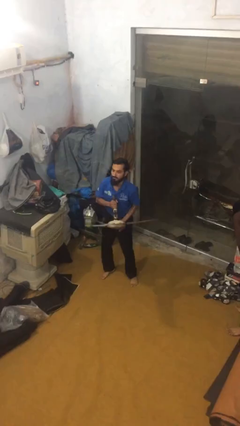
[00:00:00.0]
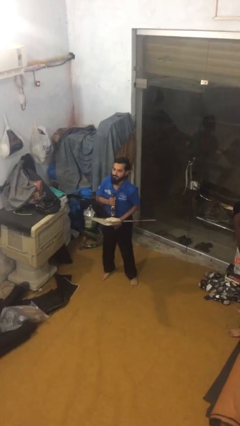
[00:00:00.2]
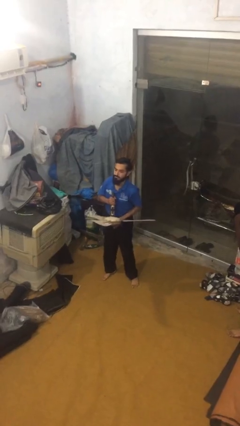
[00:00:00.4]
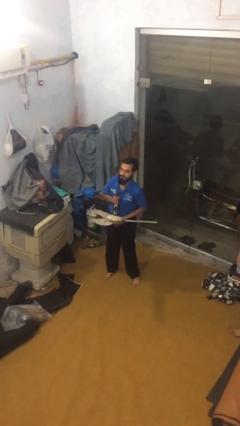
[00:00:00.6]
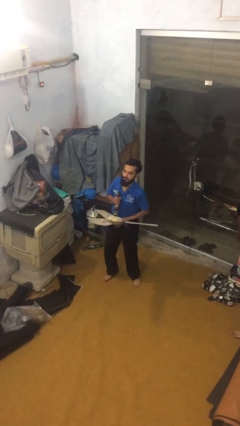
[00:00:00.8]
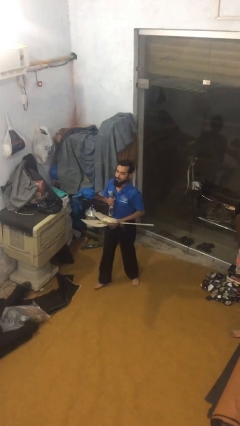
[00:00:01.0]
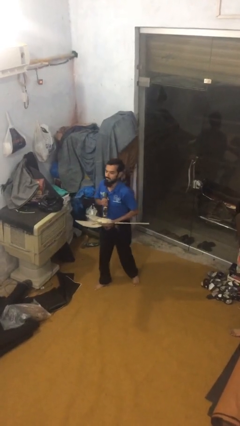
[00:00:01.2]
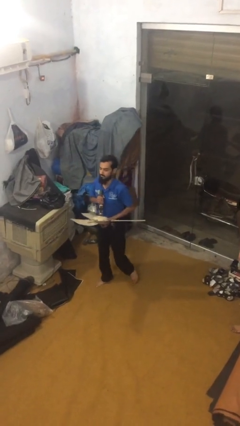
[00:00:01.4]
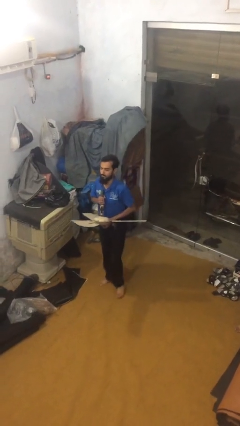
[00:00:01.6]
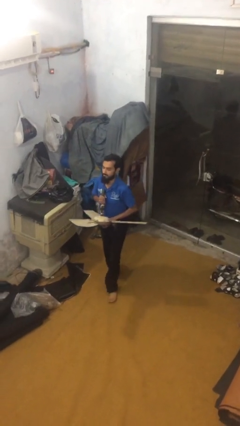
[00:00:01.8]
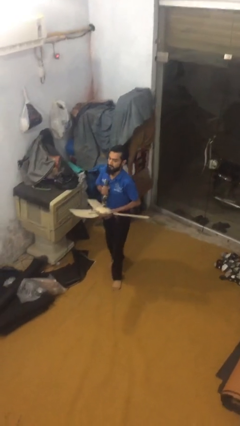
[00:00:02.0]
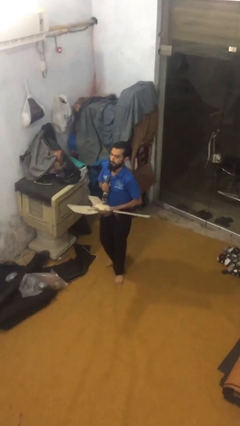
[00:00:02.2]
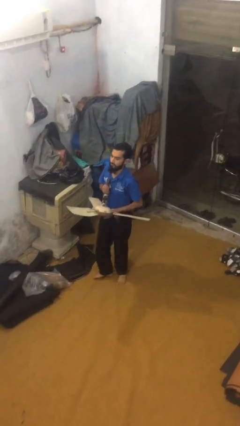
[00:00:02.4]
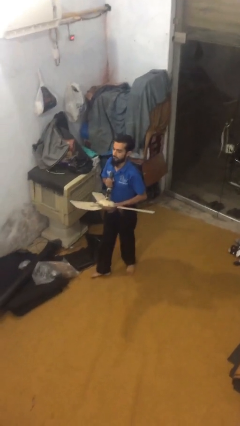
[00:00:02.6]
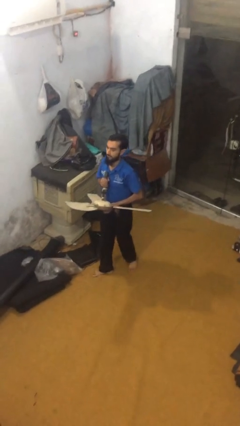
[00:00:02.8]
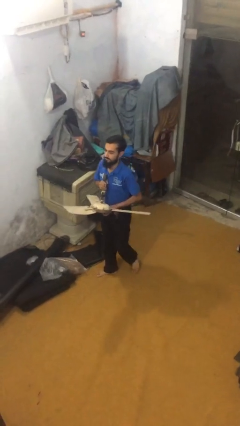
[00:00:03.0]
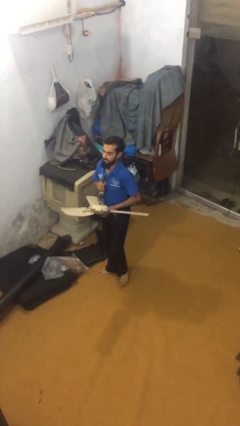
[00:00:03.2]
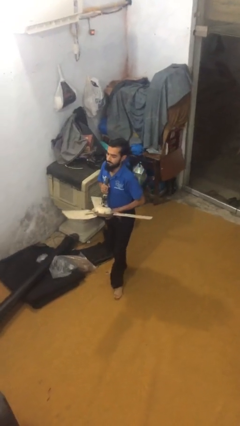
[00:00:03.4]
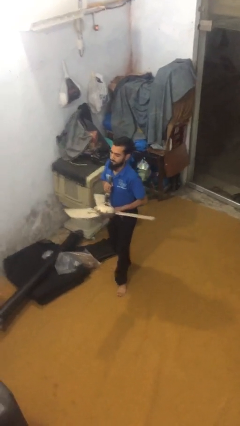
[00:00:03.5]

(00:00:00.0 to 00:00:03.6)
person carries heavy object

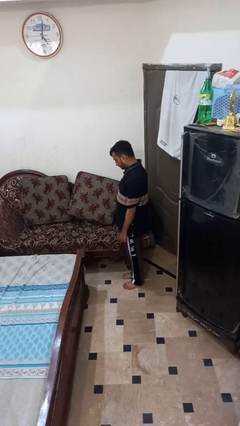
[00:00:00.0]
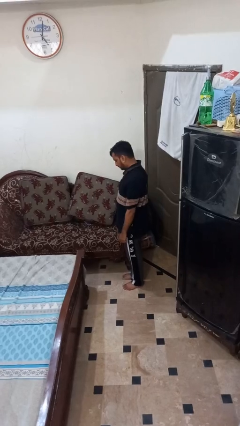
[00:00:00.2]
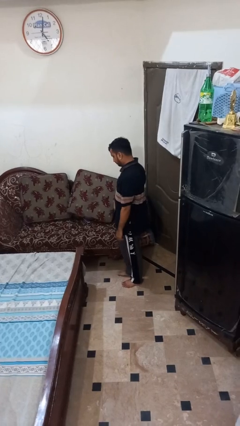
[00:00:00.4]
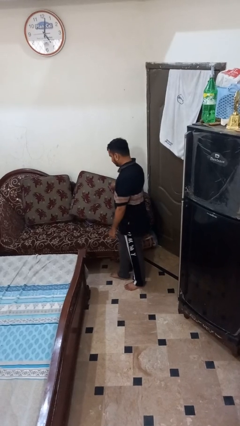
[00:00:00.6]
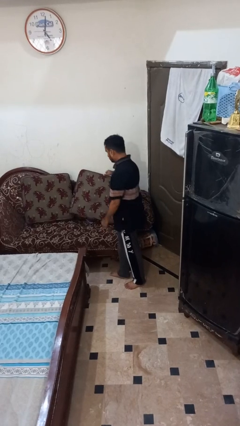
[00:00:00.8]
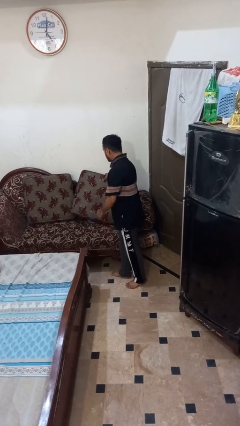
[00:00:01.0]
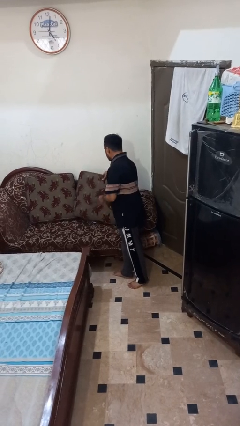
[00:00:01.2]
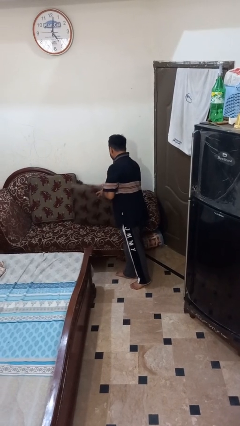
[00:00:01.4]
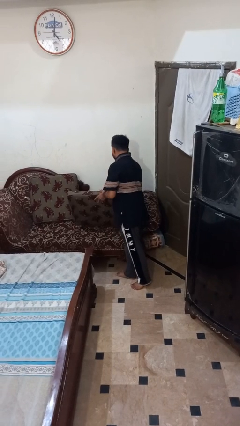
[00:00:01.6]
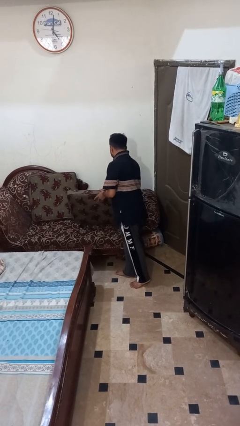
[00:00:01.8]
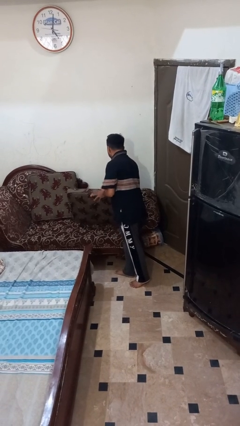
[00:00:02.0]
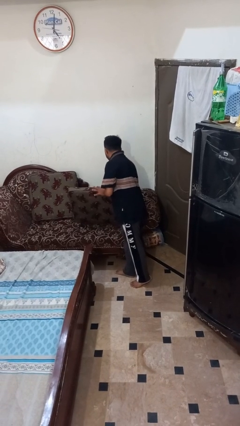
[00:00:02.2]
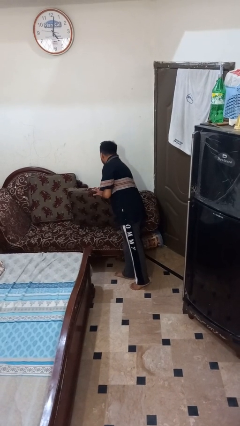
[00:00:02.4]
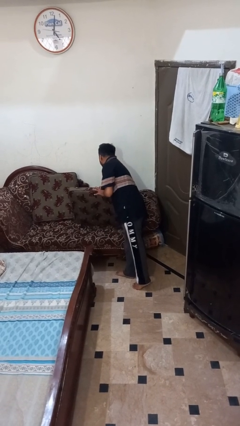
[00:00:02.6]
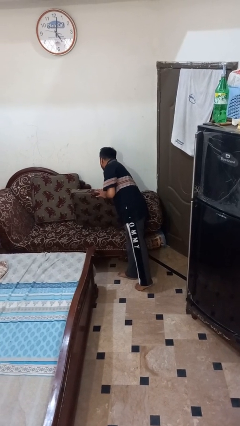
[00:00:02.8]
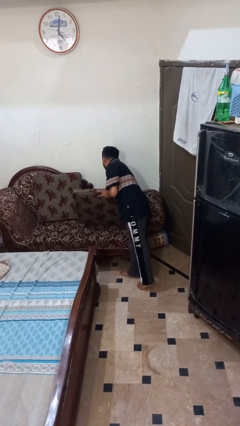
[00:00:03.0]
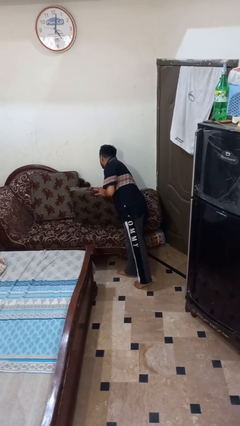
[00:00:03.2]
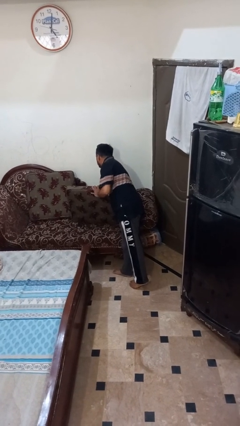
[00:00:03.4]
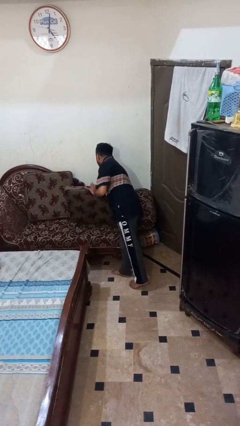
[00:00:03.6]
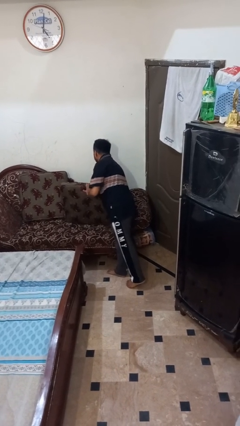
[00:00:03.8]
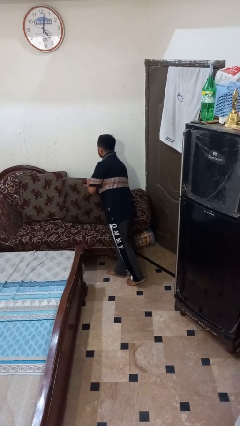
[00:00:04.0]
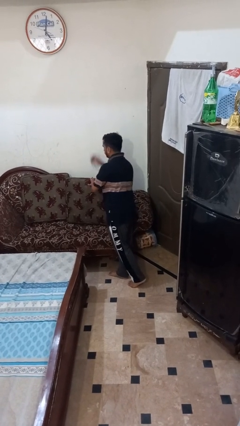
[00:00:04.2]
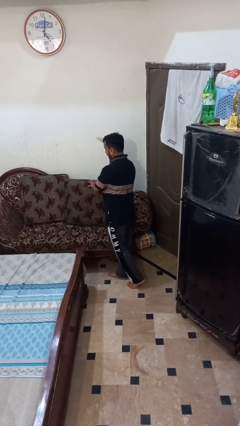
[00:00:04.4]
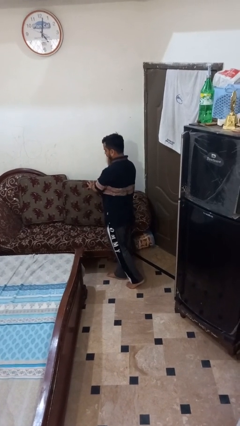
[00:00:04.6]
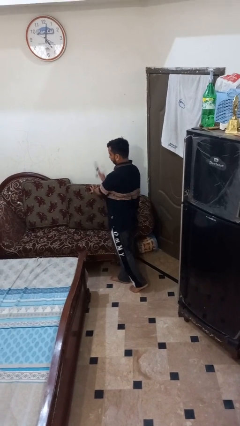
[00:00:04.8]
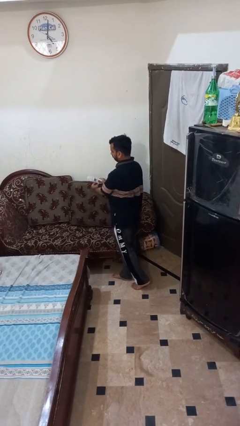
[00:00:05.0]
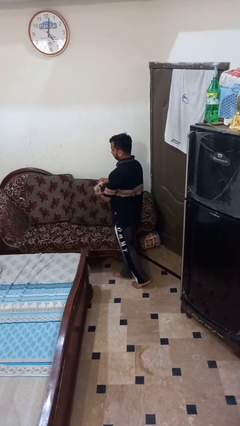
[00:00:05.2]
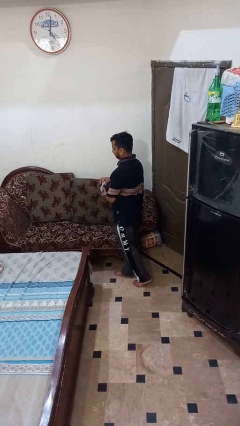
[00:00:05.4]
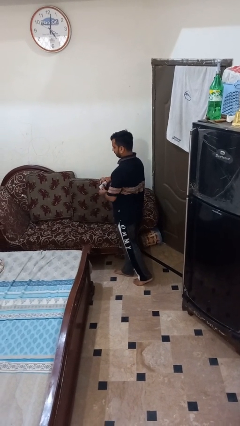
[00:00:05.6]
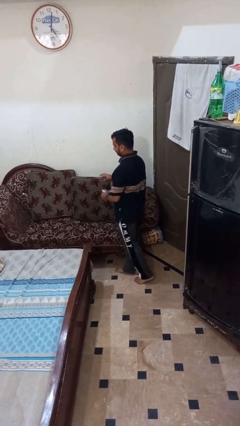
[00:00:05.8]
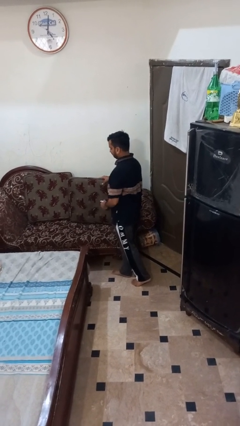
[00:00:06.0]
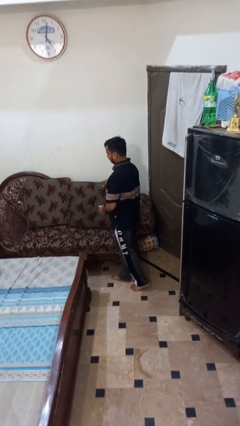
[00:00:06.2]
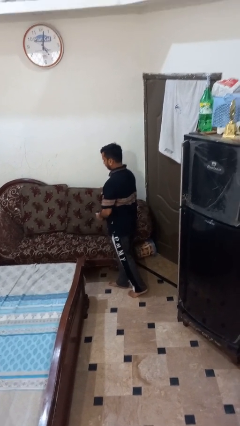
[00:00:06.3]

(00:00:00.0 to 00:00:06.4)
person searches in couch

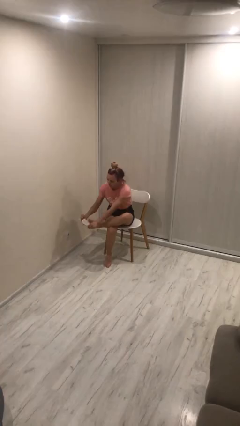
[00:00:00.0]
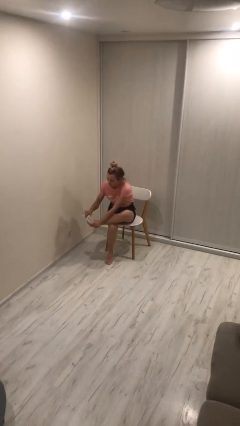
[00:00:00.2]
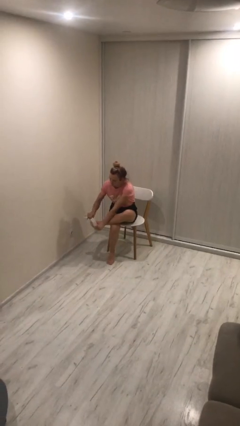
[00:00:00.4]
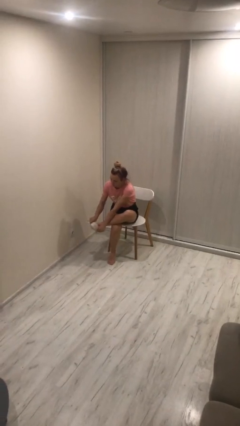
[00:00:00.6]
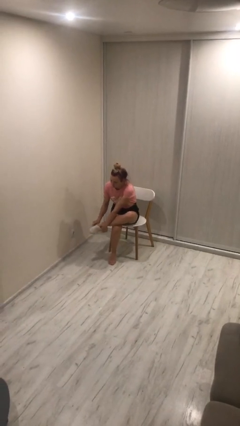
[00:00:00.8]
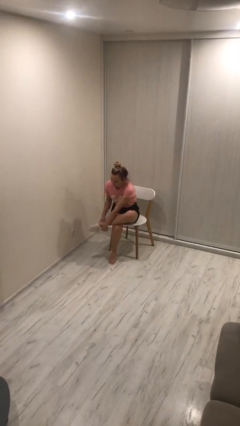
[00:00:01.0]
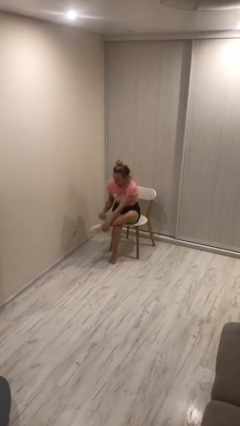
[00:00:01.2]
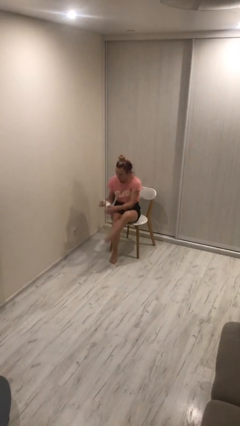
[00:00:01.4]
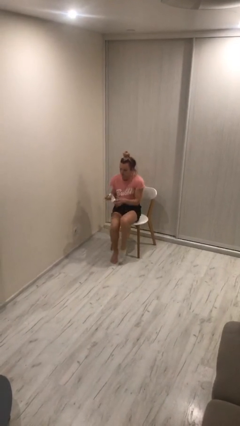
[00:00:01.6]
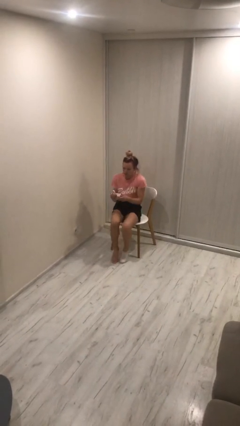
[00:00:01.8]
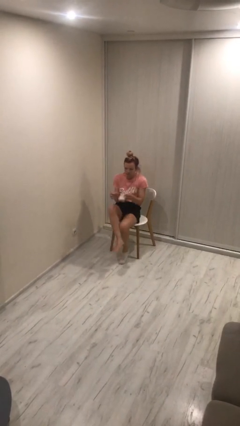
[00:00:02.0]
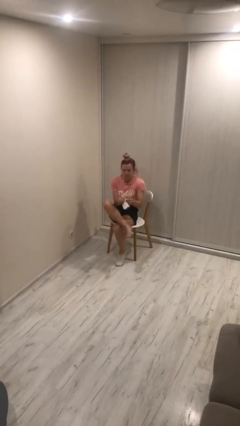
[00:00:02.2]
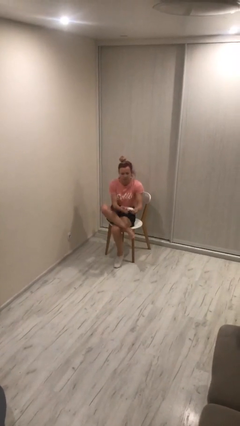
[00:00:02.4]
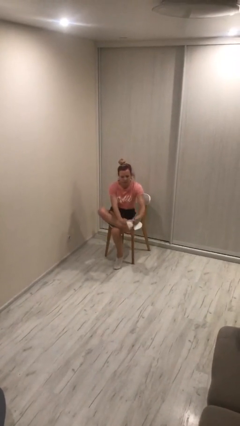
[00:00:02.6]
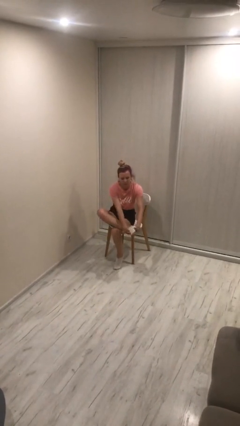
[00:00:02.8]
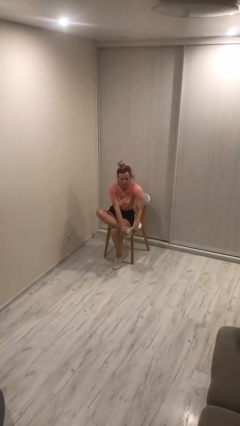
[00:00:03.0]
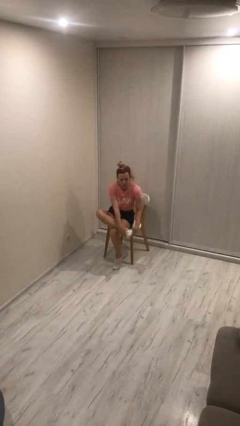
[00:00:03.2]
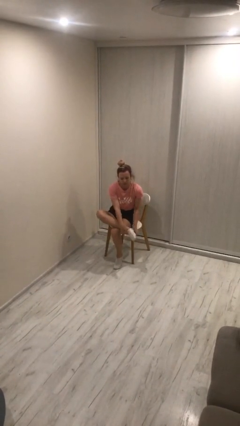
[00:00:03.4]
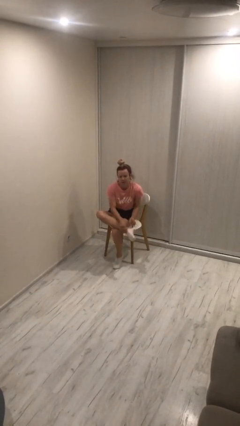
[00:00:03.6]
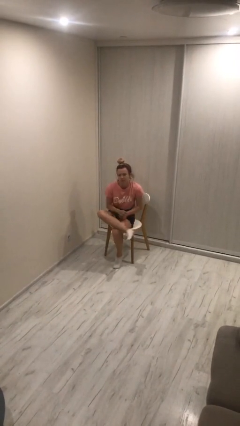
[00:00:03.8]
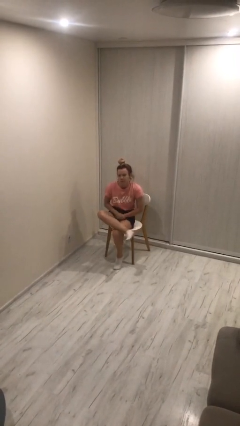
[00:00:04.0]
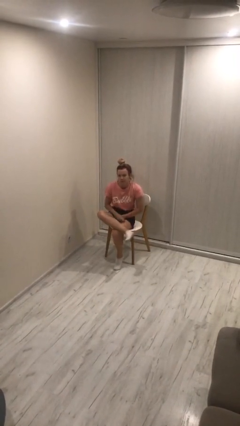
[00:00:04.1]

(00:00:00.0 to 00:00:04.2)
person puts on socks

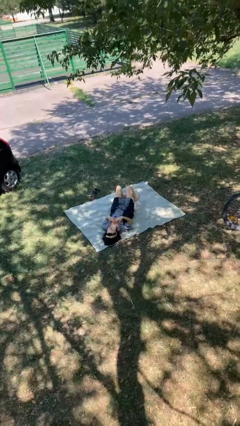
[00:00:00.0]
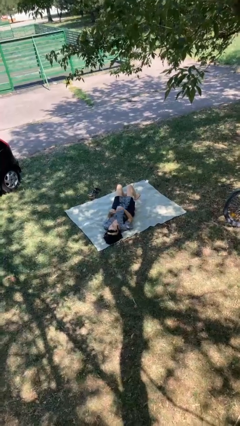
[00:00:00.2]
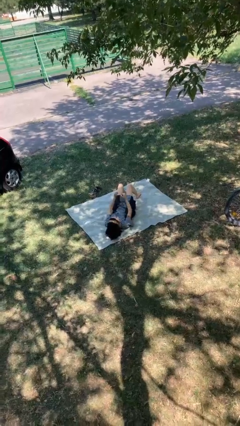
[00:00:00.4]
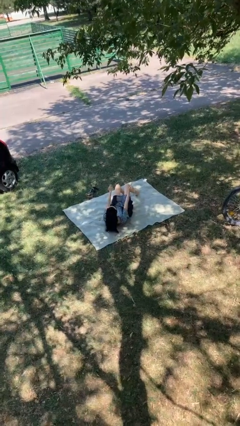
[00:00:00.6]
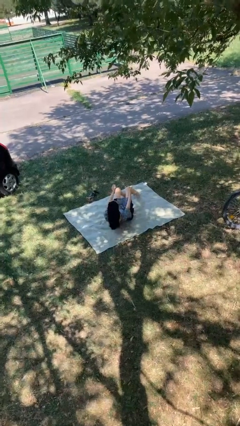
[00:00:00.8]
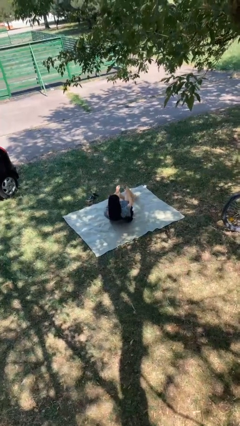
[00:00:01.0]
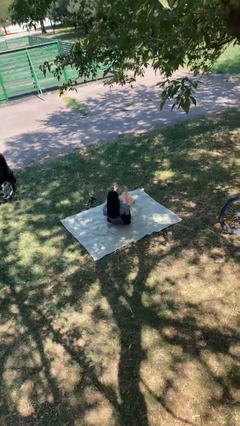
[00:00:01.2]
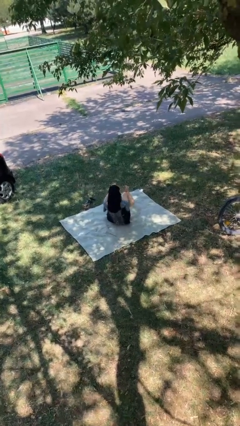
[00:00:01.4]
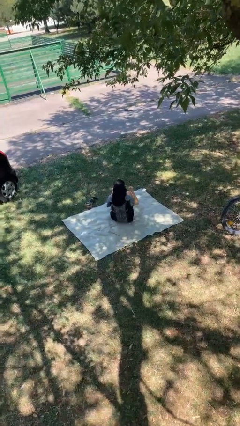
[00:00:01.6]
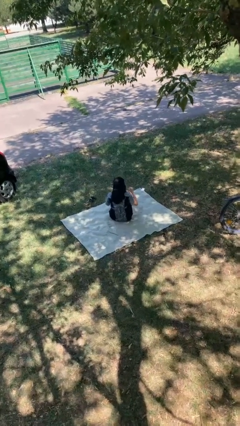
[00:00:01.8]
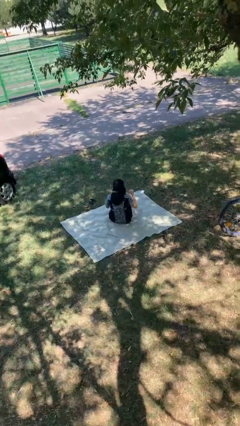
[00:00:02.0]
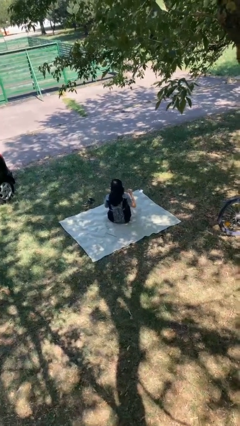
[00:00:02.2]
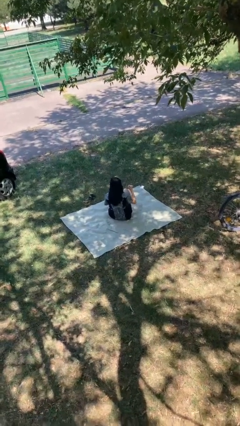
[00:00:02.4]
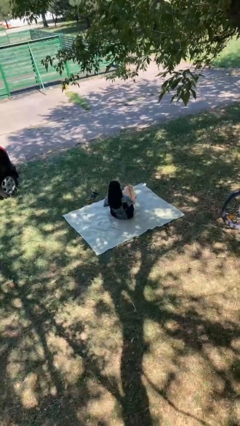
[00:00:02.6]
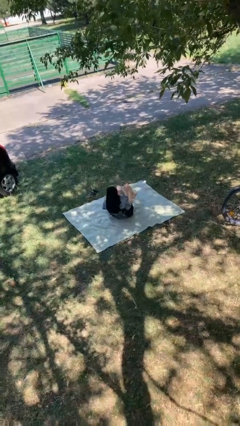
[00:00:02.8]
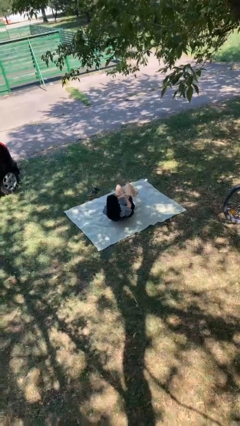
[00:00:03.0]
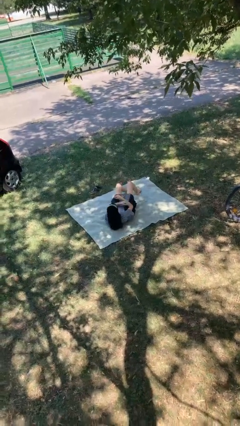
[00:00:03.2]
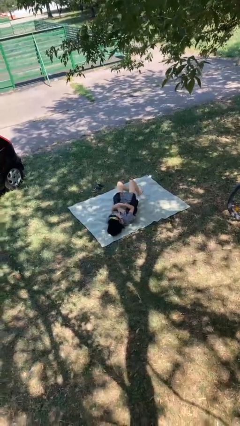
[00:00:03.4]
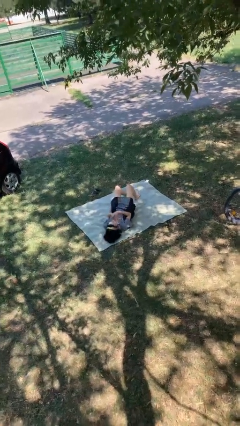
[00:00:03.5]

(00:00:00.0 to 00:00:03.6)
person exercises with situp
